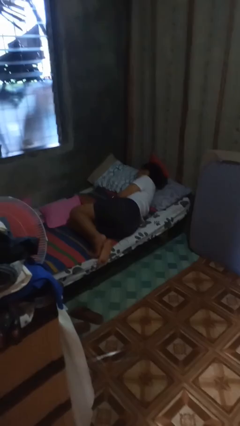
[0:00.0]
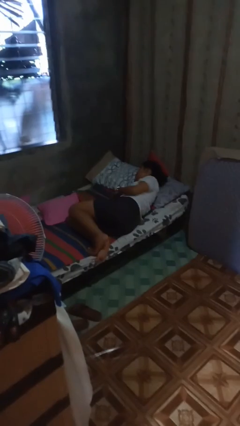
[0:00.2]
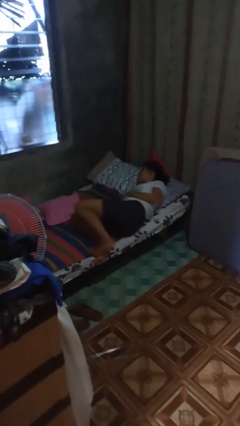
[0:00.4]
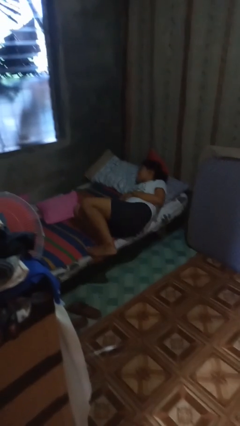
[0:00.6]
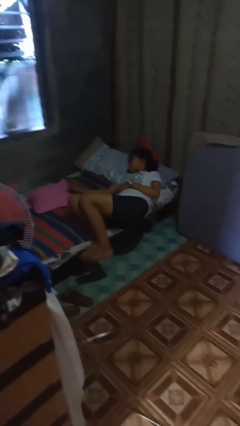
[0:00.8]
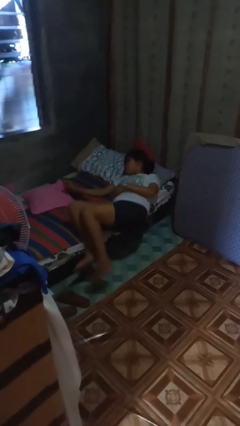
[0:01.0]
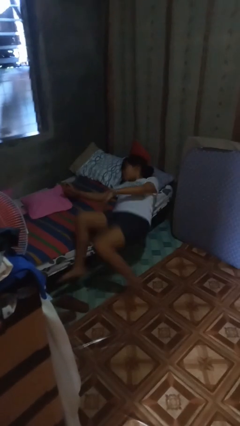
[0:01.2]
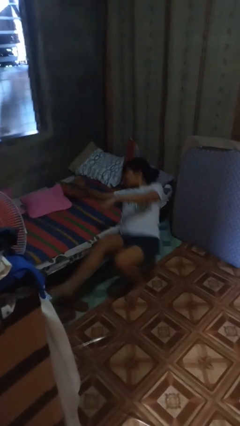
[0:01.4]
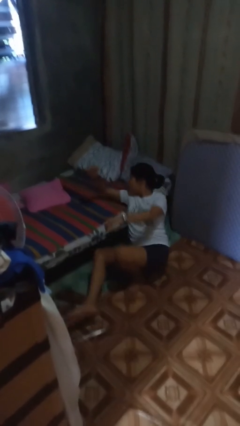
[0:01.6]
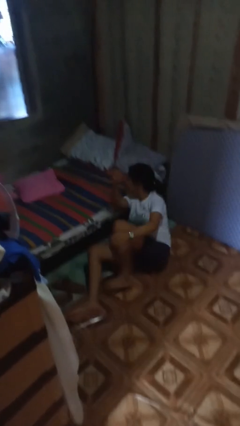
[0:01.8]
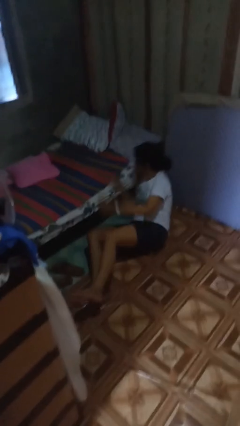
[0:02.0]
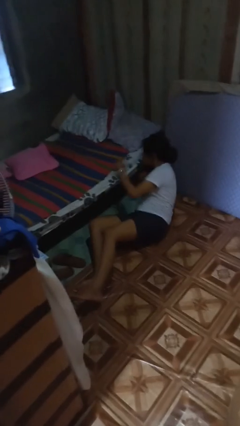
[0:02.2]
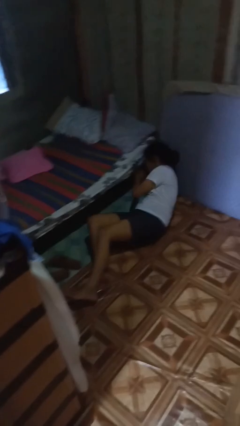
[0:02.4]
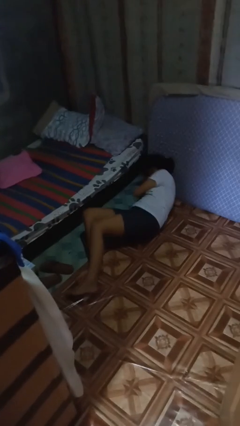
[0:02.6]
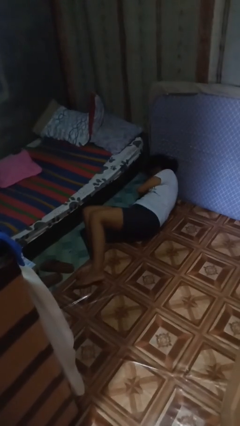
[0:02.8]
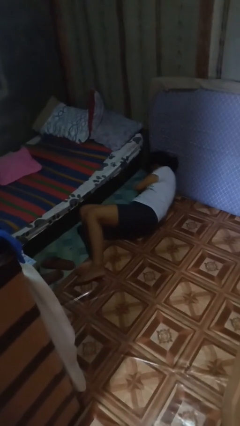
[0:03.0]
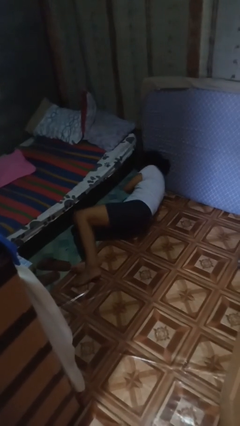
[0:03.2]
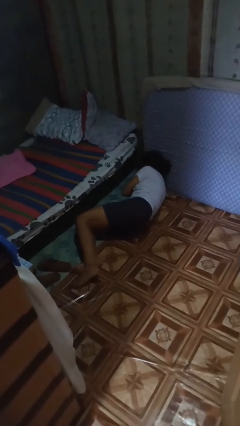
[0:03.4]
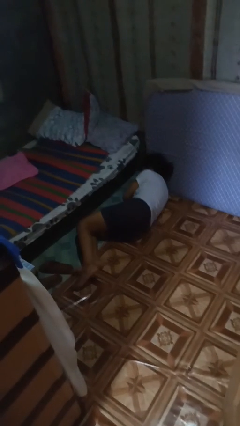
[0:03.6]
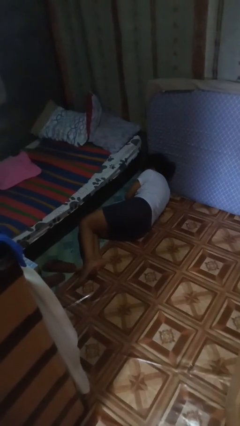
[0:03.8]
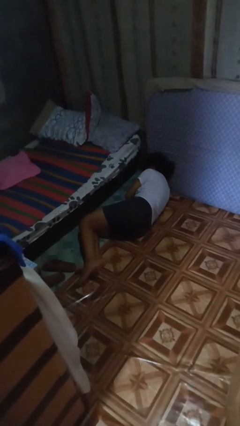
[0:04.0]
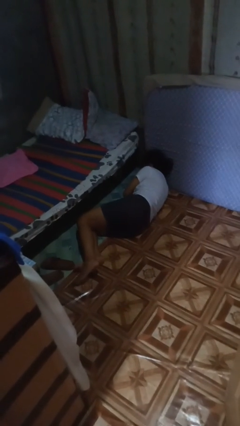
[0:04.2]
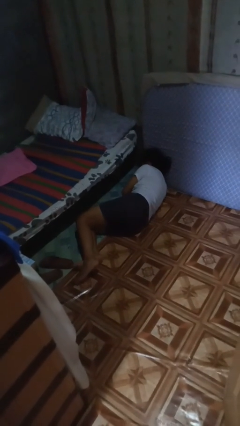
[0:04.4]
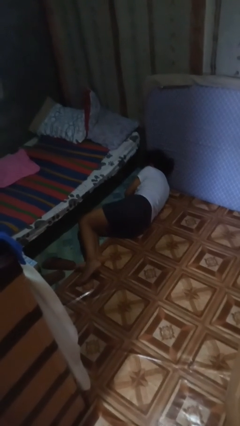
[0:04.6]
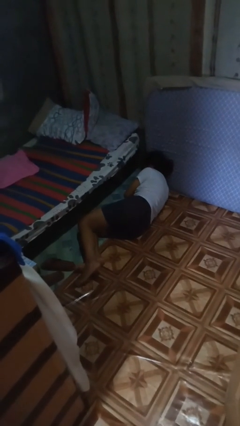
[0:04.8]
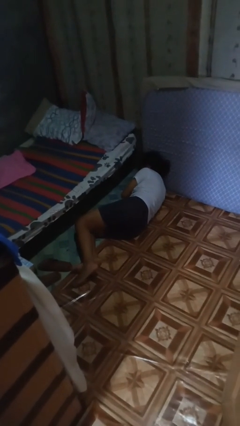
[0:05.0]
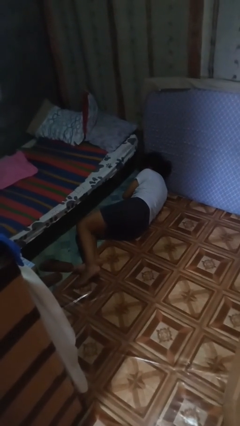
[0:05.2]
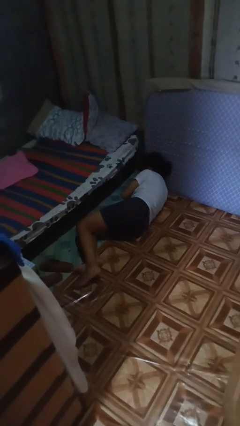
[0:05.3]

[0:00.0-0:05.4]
person falls from bed

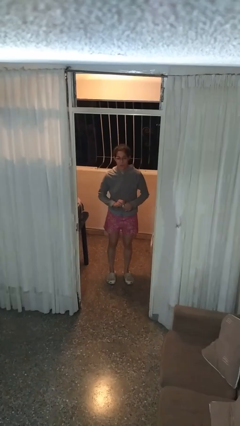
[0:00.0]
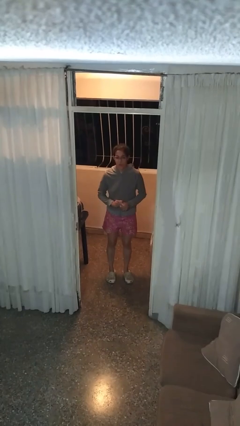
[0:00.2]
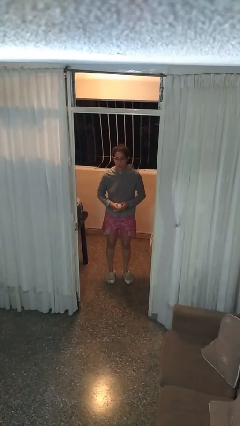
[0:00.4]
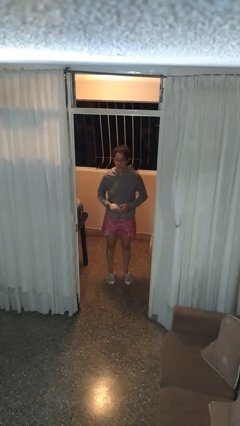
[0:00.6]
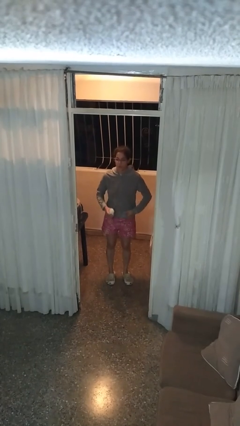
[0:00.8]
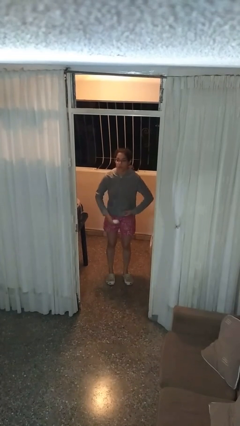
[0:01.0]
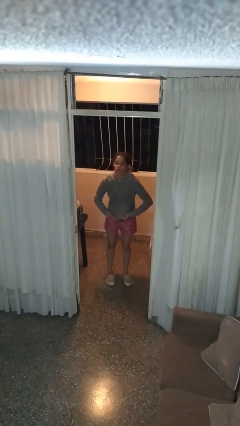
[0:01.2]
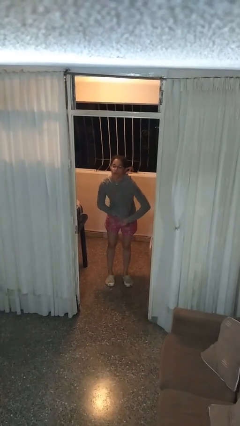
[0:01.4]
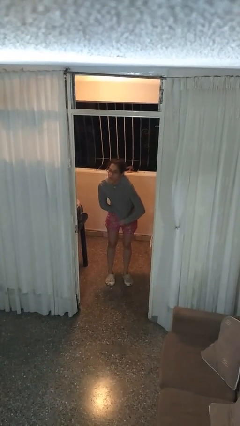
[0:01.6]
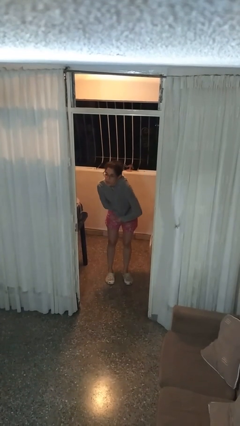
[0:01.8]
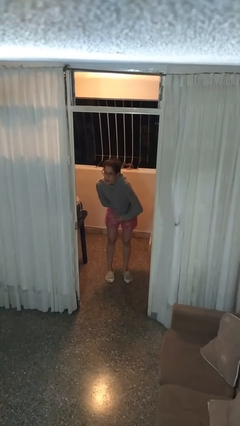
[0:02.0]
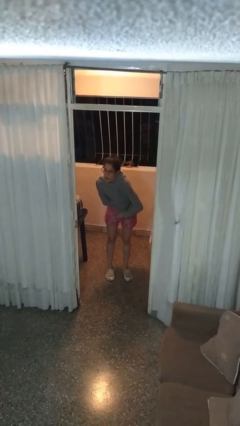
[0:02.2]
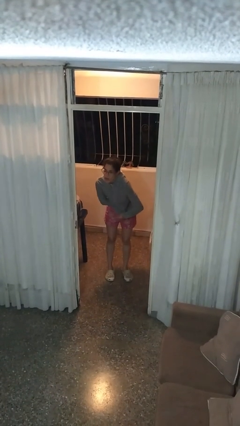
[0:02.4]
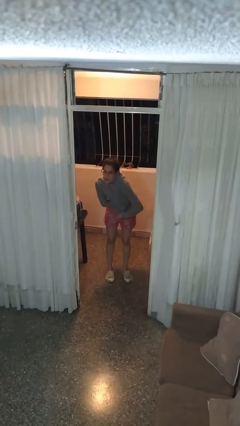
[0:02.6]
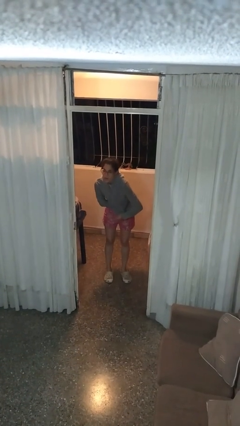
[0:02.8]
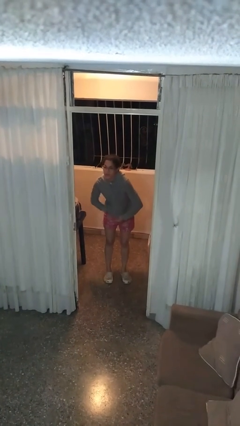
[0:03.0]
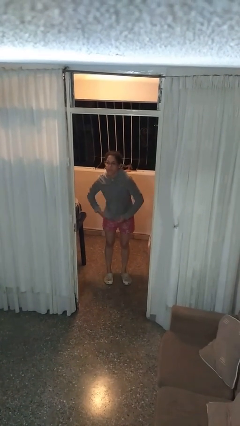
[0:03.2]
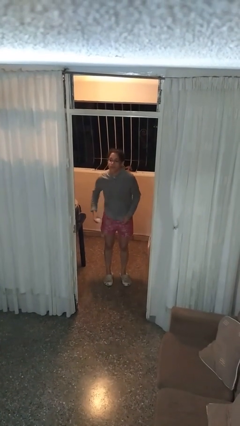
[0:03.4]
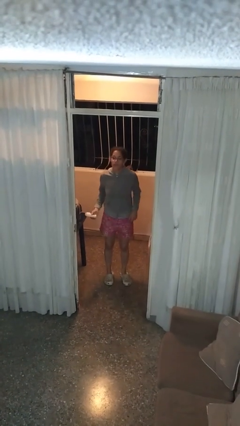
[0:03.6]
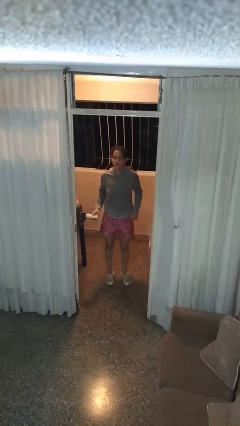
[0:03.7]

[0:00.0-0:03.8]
person applies deodorant

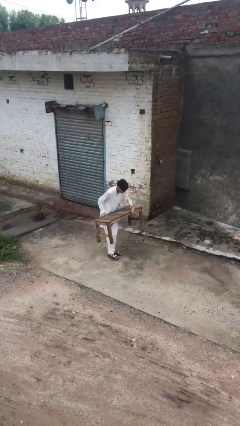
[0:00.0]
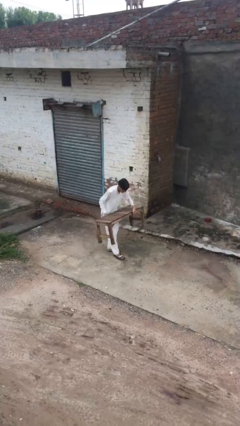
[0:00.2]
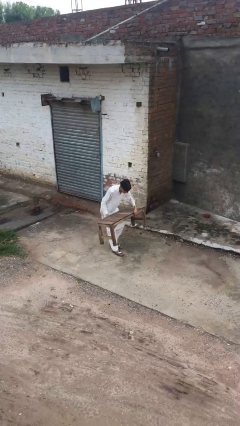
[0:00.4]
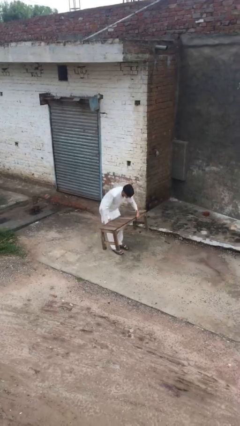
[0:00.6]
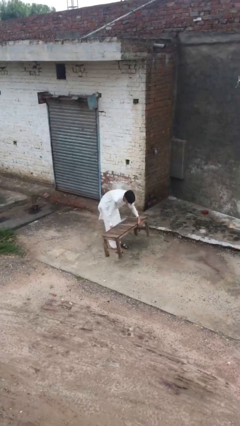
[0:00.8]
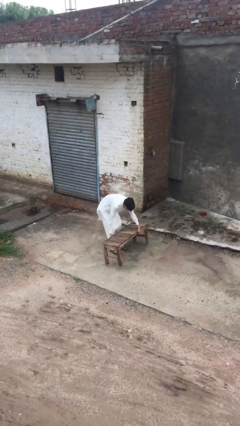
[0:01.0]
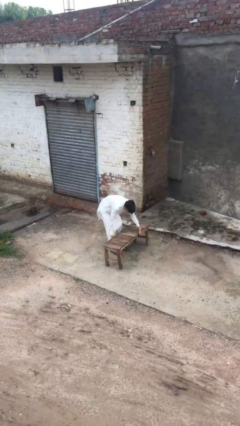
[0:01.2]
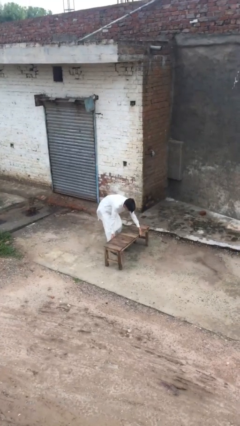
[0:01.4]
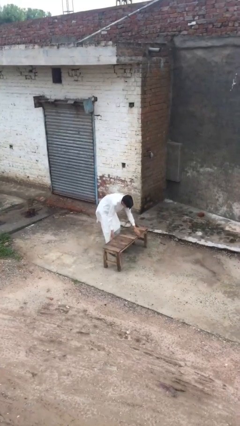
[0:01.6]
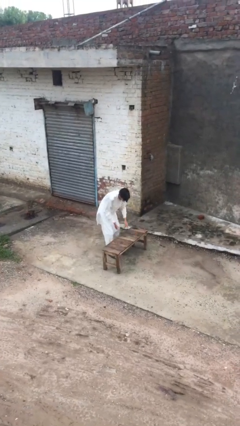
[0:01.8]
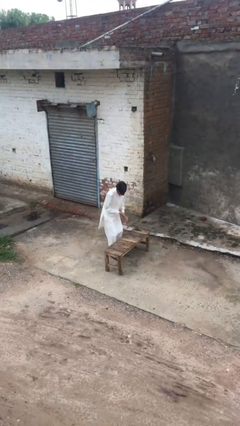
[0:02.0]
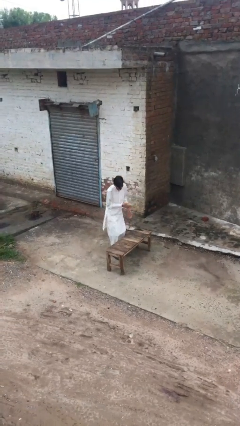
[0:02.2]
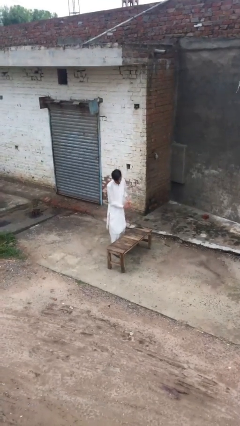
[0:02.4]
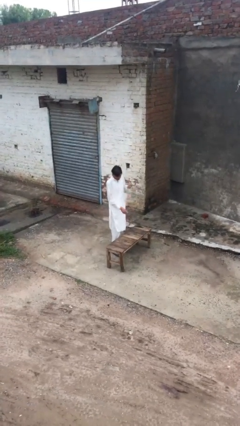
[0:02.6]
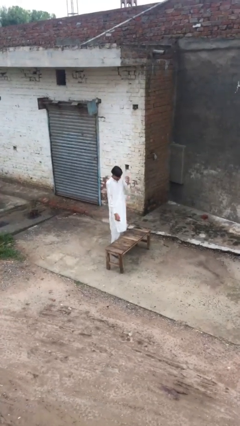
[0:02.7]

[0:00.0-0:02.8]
person puts down object on floor

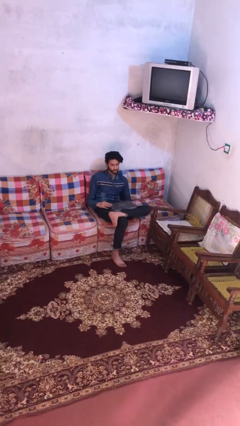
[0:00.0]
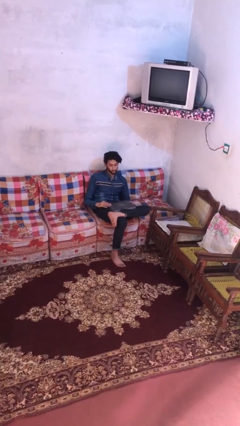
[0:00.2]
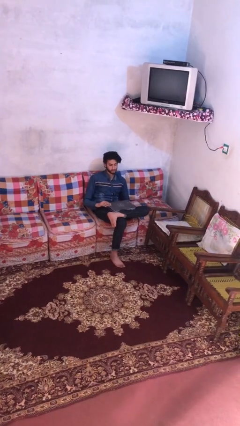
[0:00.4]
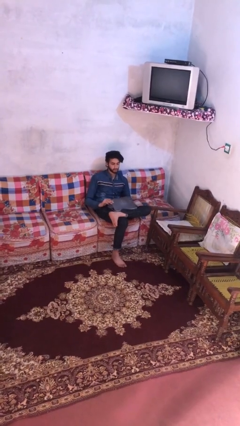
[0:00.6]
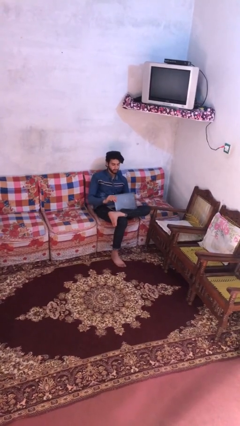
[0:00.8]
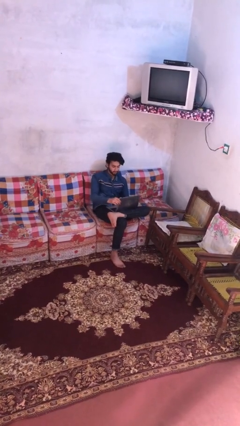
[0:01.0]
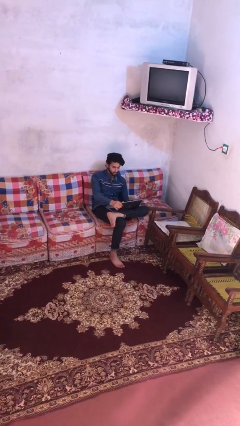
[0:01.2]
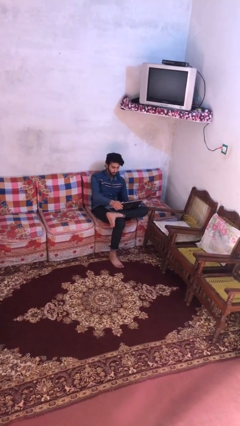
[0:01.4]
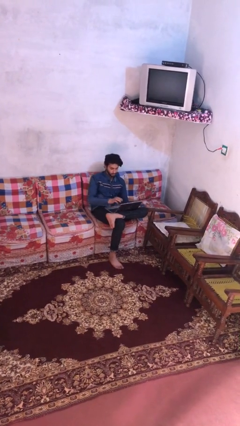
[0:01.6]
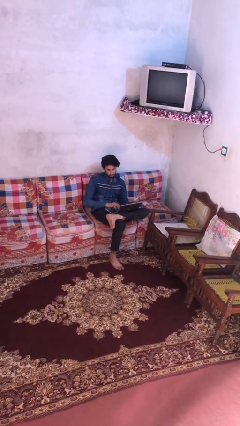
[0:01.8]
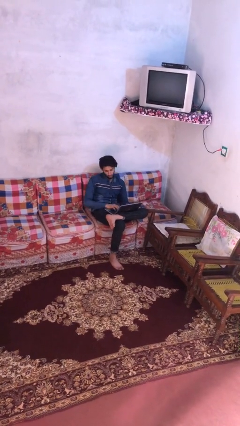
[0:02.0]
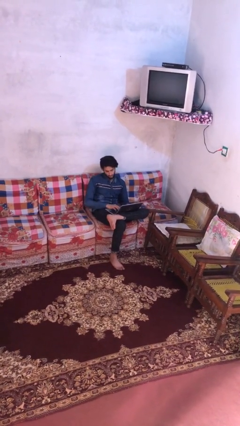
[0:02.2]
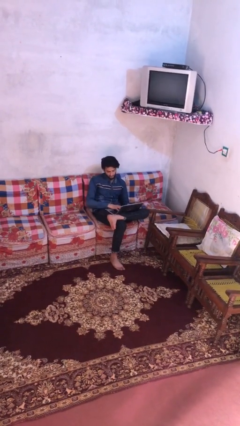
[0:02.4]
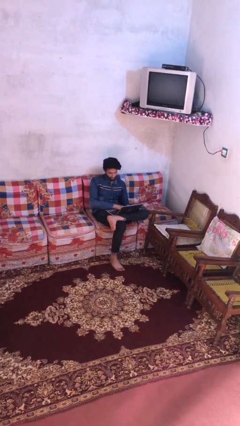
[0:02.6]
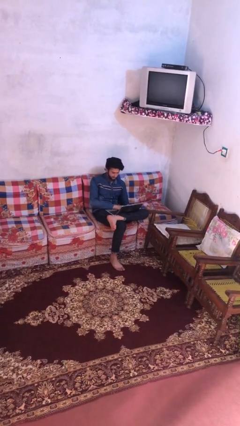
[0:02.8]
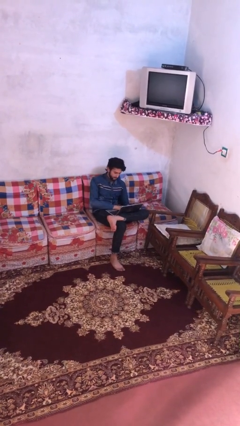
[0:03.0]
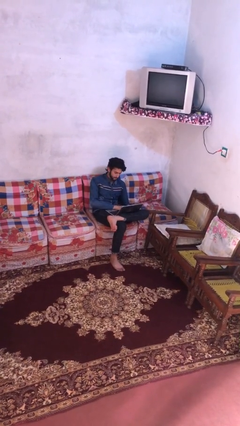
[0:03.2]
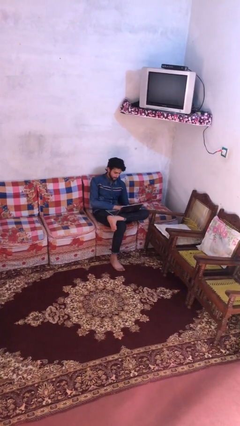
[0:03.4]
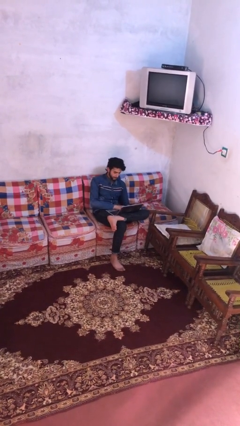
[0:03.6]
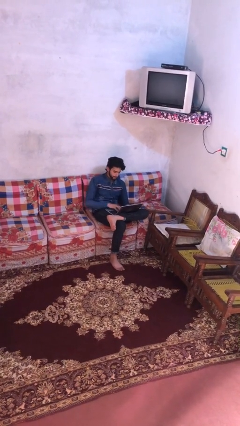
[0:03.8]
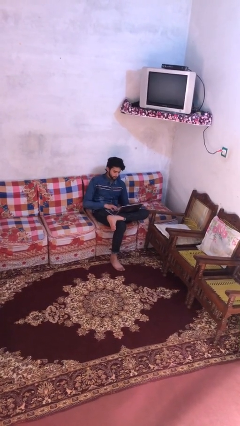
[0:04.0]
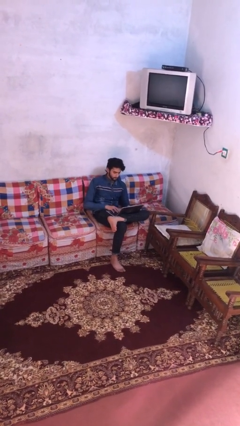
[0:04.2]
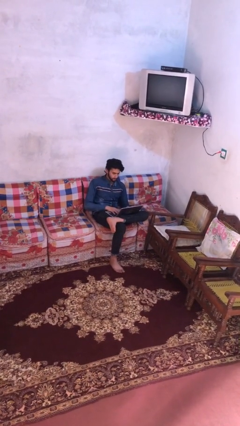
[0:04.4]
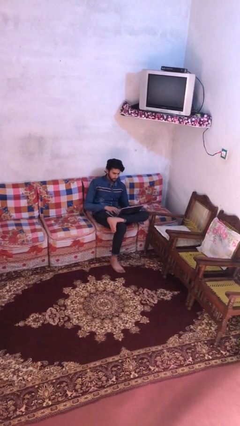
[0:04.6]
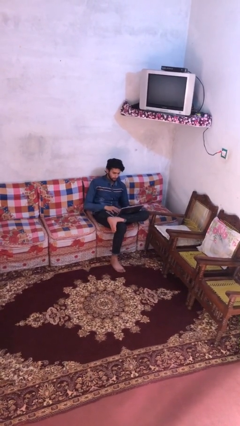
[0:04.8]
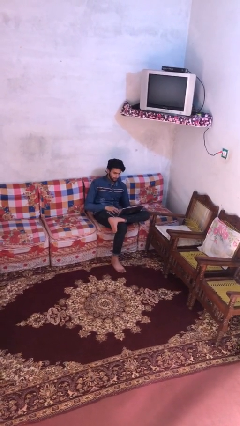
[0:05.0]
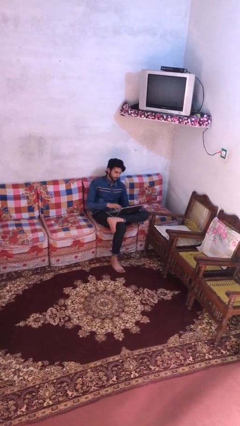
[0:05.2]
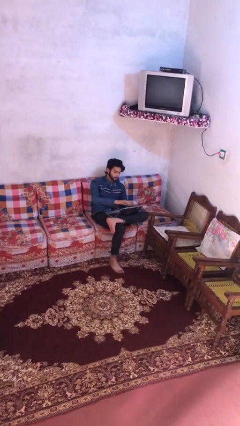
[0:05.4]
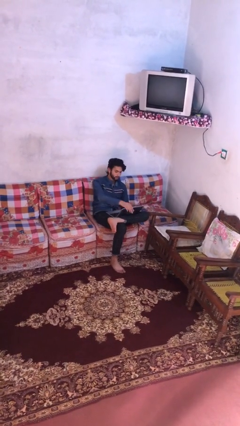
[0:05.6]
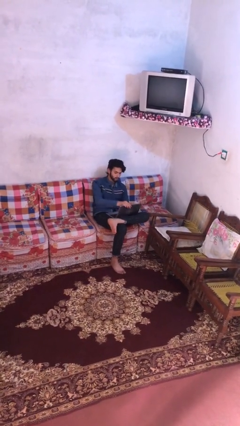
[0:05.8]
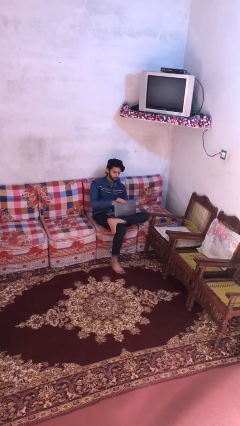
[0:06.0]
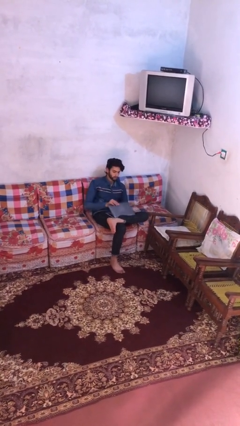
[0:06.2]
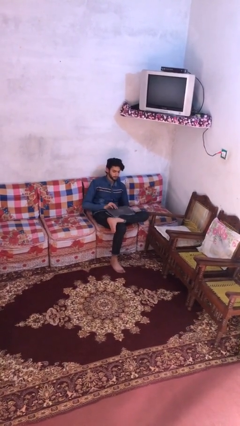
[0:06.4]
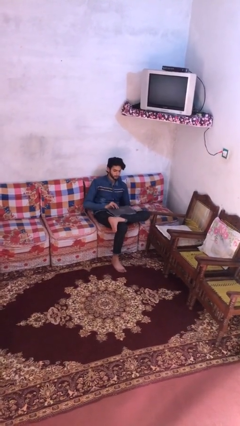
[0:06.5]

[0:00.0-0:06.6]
person interacts with laptop
